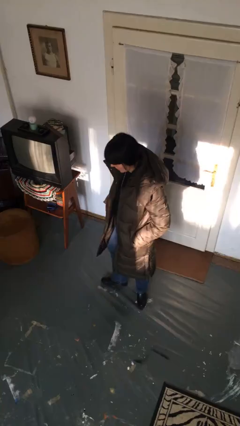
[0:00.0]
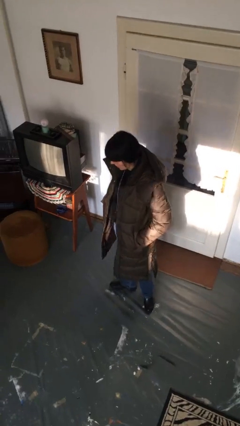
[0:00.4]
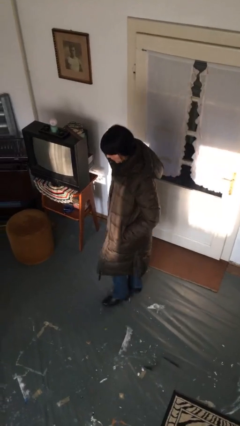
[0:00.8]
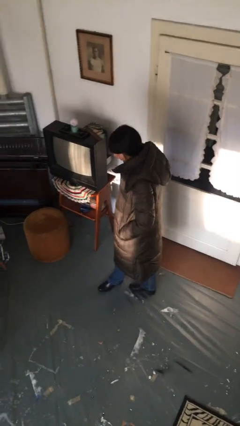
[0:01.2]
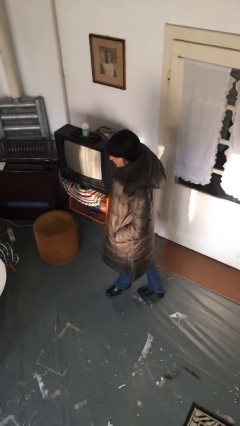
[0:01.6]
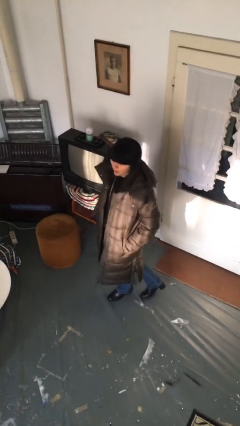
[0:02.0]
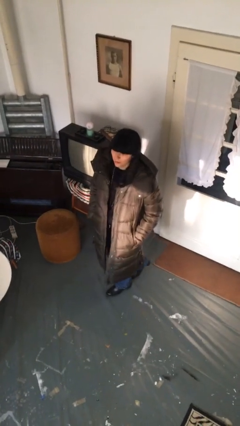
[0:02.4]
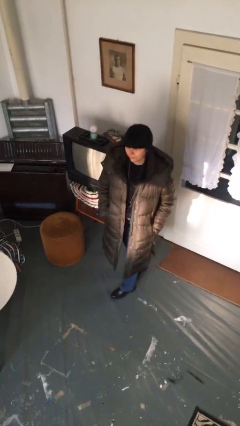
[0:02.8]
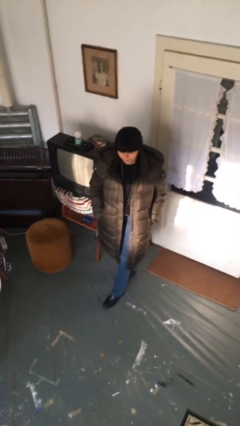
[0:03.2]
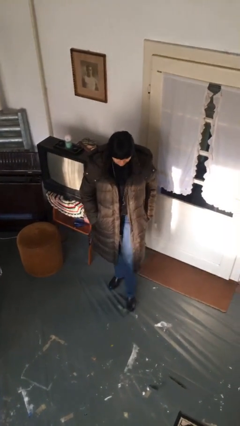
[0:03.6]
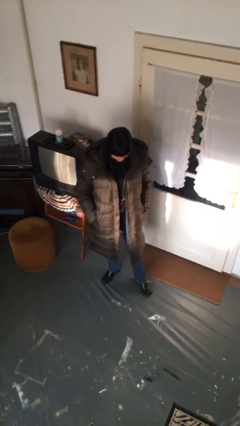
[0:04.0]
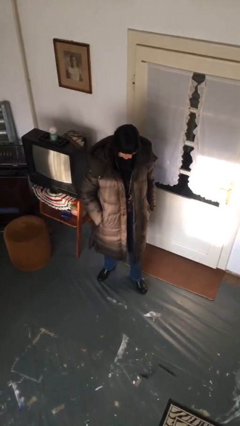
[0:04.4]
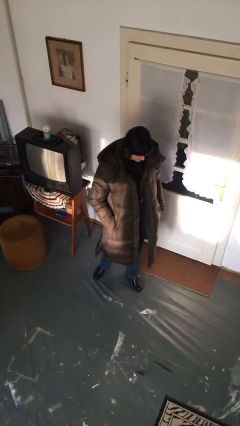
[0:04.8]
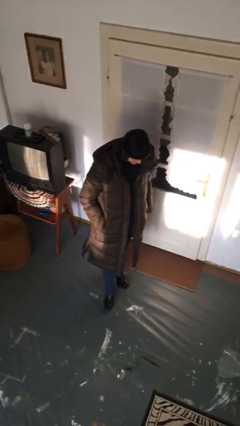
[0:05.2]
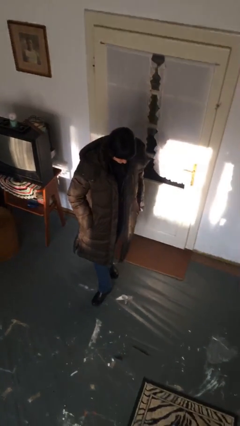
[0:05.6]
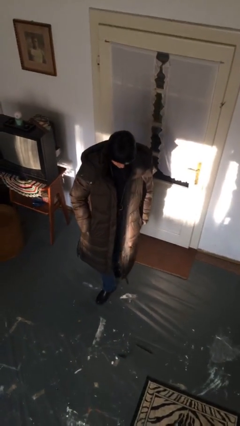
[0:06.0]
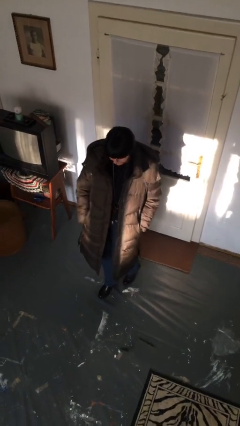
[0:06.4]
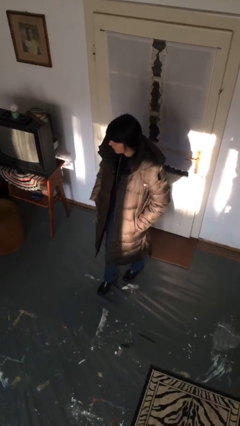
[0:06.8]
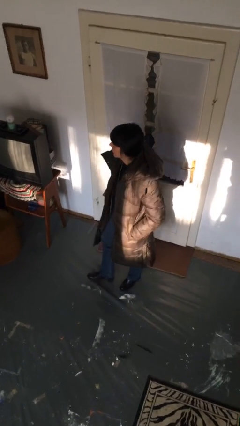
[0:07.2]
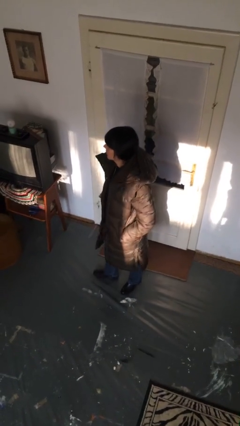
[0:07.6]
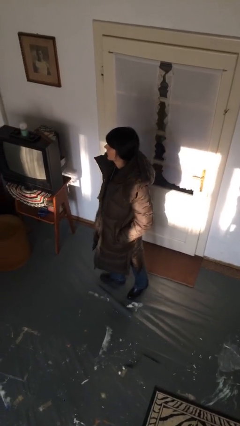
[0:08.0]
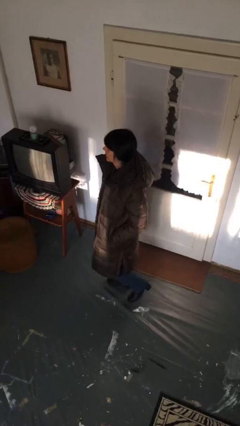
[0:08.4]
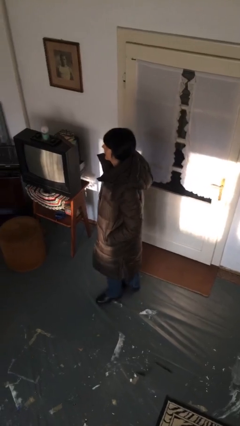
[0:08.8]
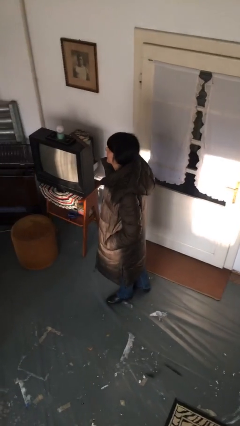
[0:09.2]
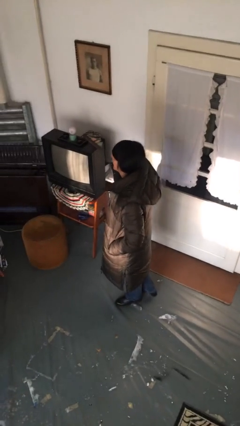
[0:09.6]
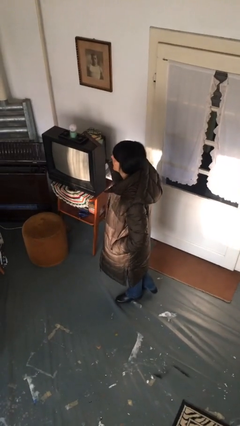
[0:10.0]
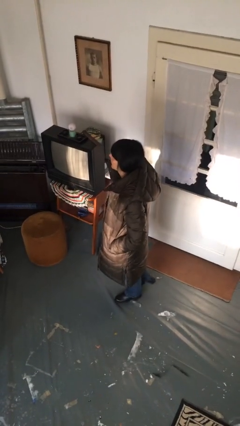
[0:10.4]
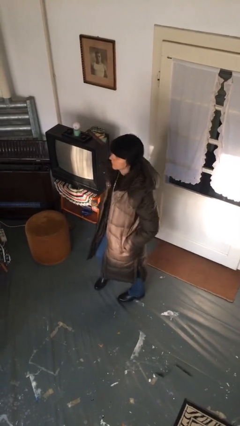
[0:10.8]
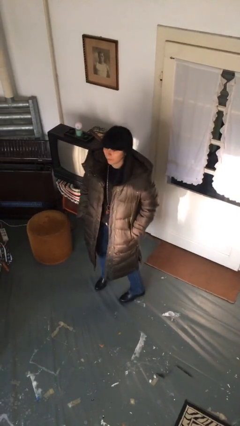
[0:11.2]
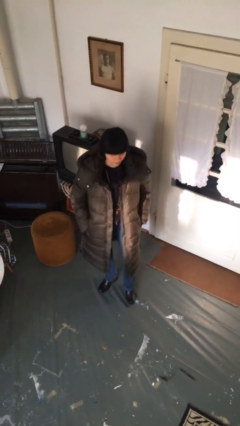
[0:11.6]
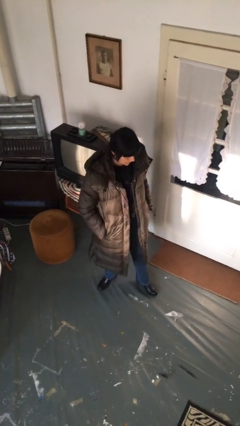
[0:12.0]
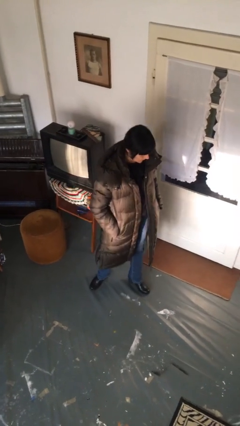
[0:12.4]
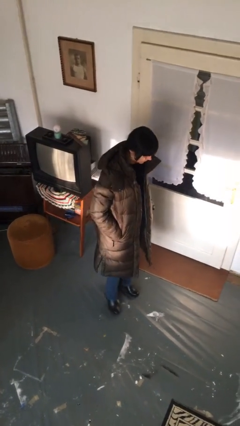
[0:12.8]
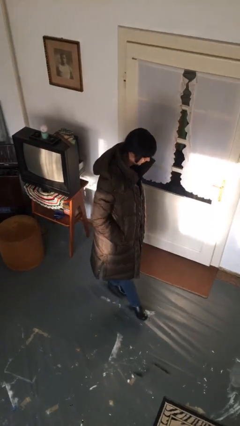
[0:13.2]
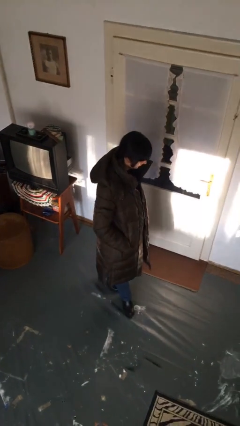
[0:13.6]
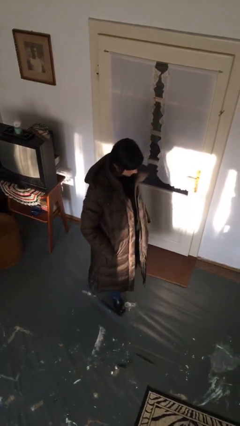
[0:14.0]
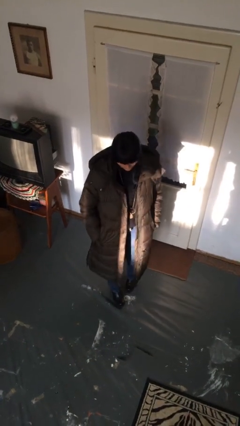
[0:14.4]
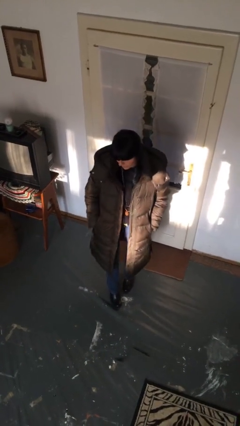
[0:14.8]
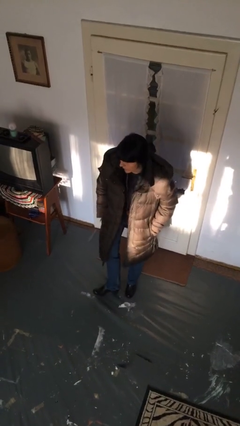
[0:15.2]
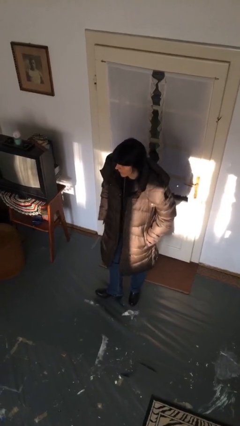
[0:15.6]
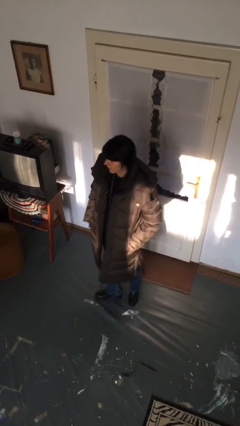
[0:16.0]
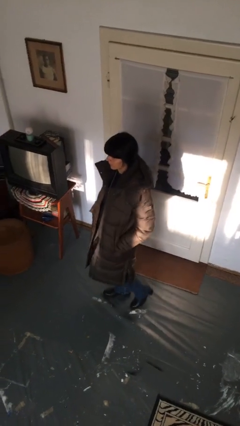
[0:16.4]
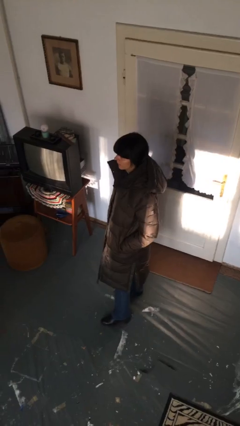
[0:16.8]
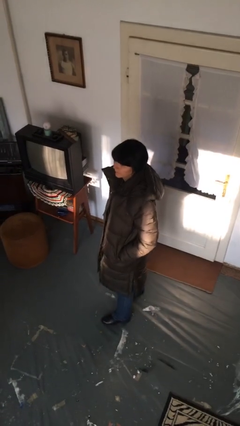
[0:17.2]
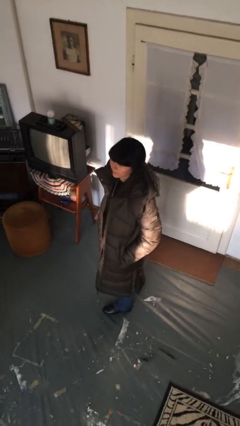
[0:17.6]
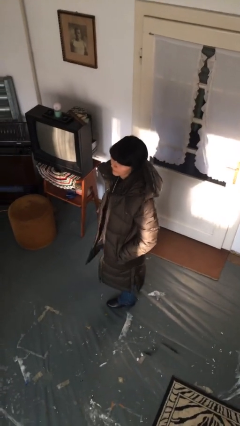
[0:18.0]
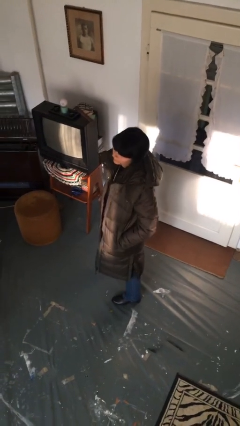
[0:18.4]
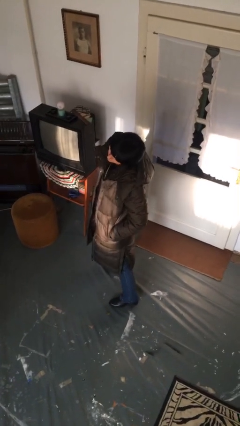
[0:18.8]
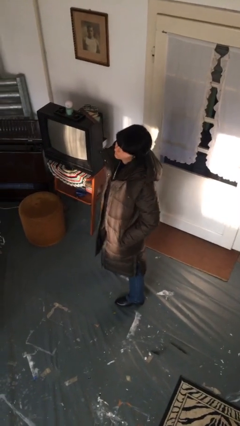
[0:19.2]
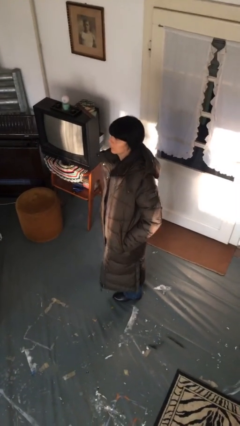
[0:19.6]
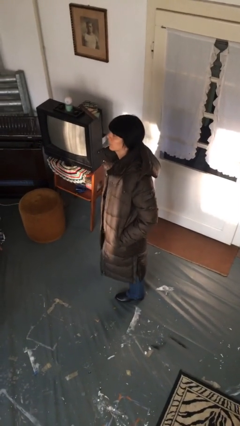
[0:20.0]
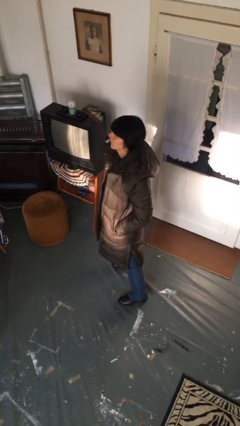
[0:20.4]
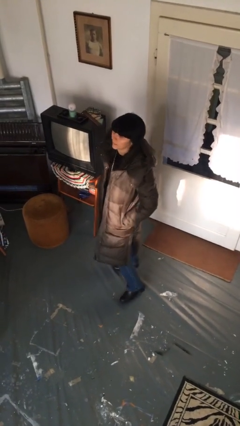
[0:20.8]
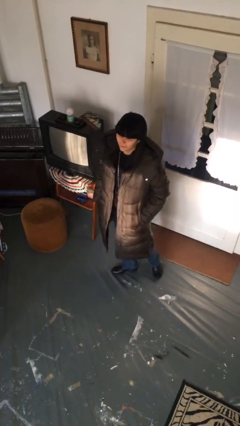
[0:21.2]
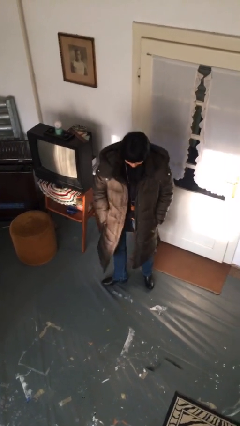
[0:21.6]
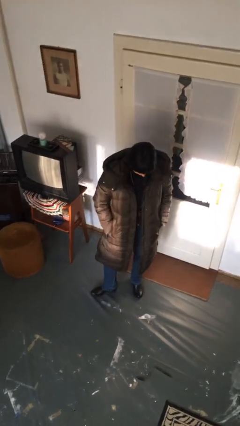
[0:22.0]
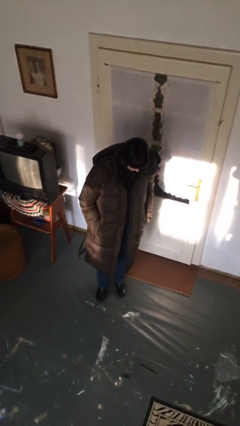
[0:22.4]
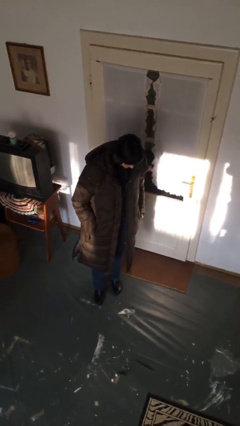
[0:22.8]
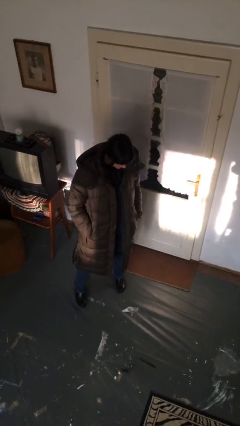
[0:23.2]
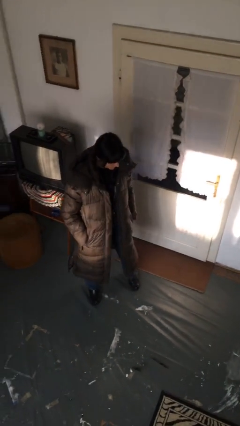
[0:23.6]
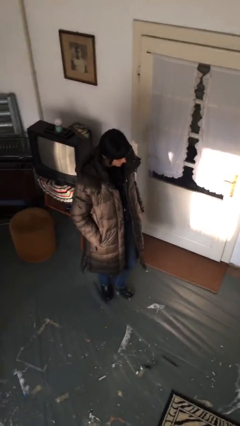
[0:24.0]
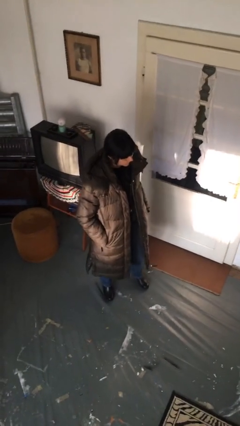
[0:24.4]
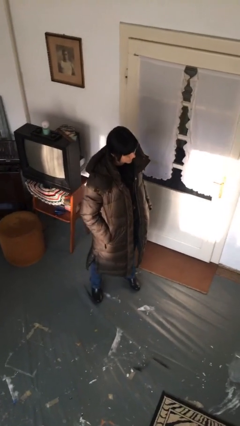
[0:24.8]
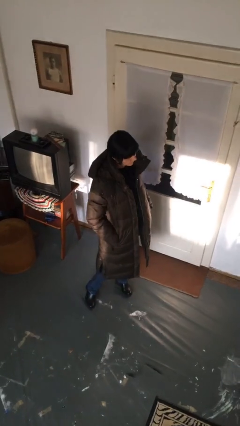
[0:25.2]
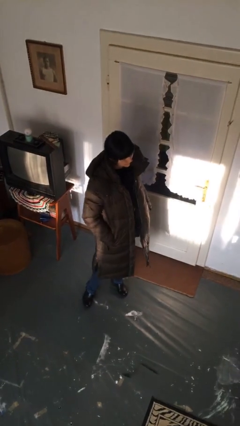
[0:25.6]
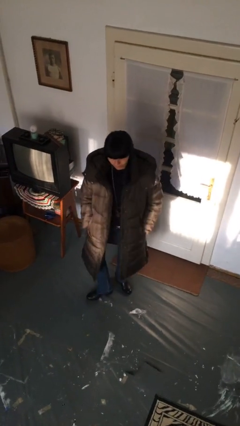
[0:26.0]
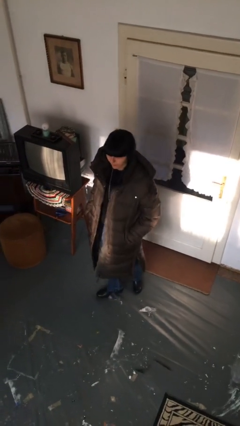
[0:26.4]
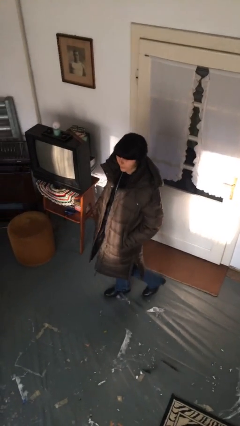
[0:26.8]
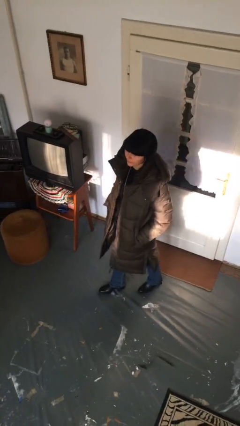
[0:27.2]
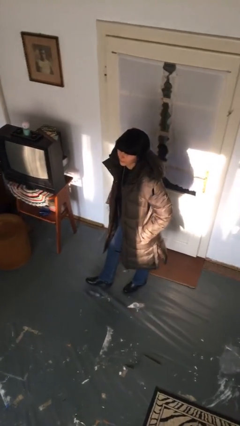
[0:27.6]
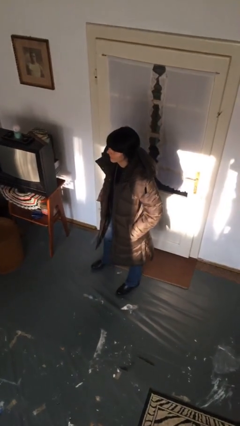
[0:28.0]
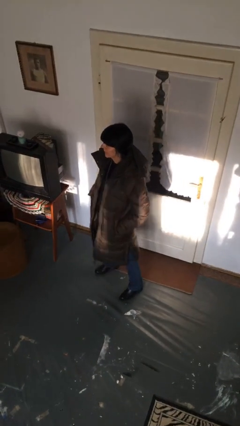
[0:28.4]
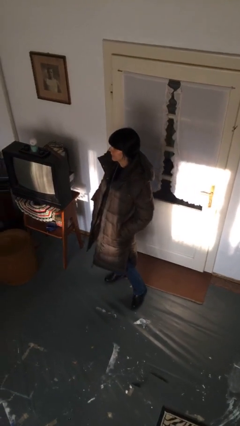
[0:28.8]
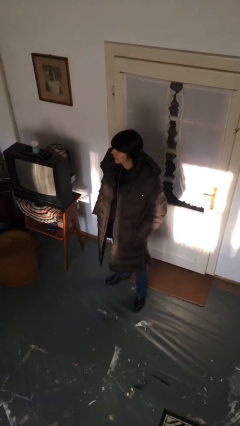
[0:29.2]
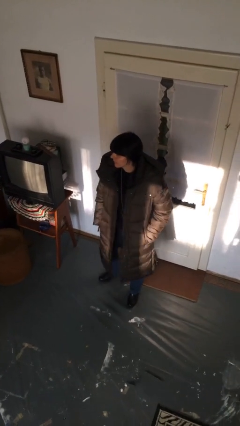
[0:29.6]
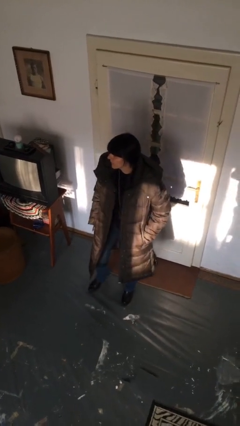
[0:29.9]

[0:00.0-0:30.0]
person walks

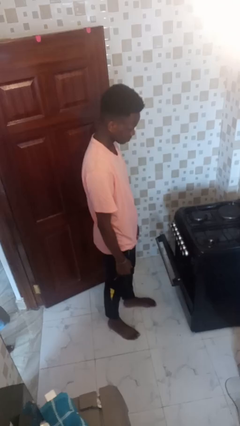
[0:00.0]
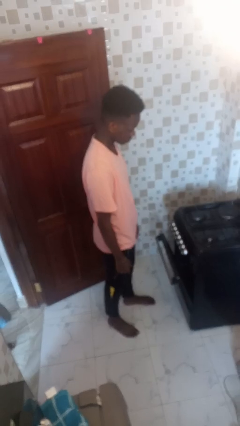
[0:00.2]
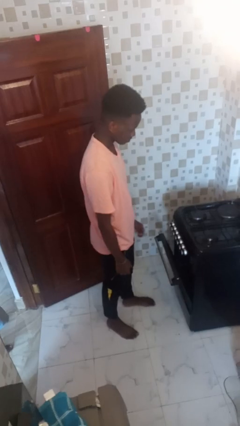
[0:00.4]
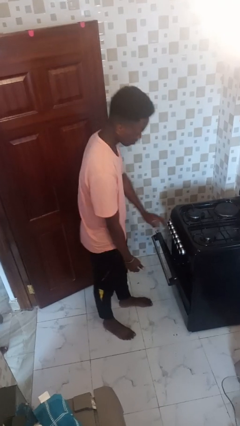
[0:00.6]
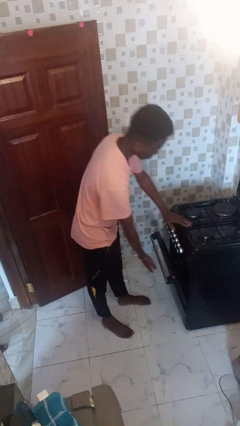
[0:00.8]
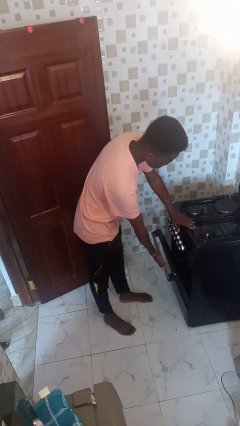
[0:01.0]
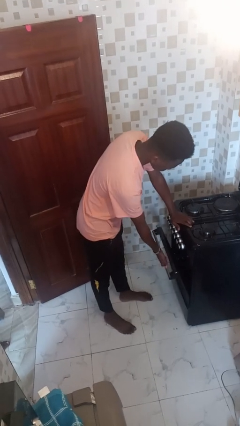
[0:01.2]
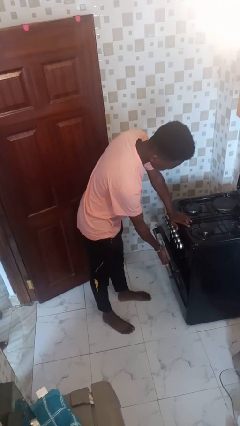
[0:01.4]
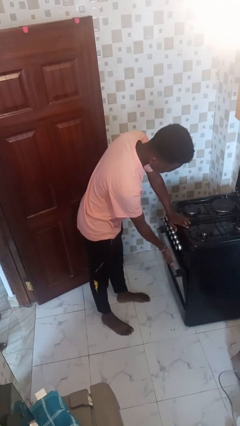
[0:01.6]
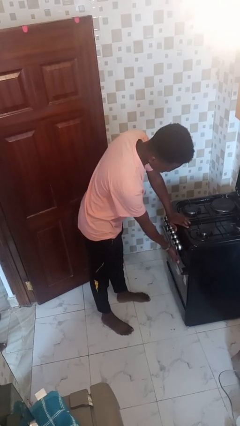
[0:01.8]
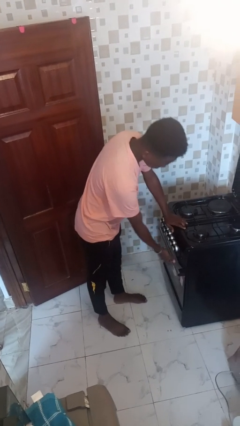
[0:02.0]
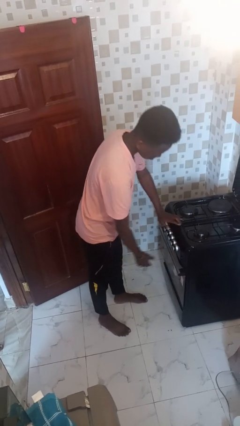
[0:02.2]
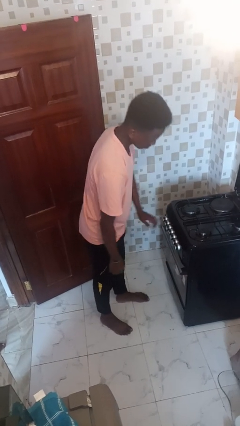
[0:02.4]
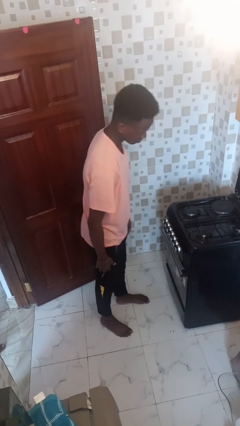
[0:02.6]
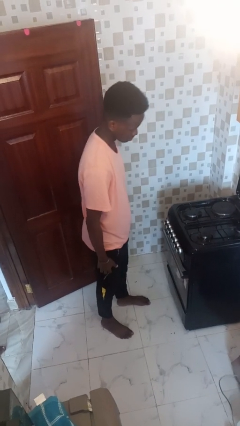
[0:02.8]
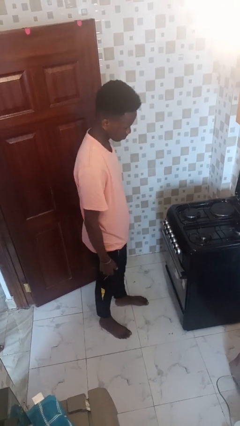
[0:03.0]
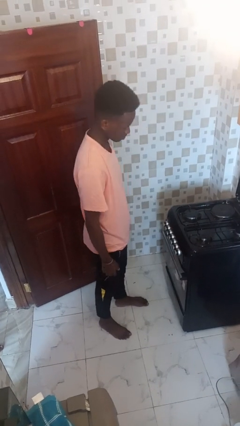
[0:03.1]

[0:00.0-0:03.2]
person closes oven door
